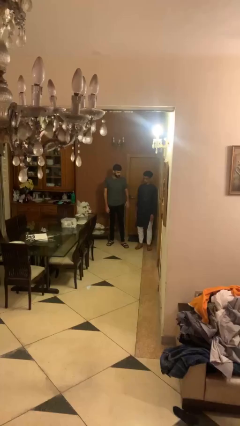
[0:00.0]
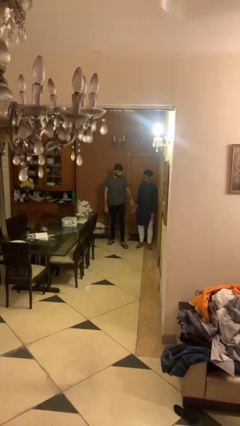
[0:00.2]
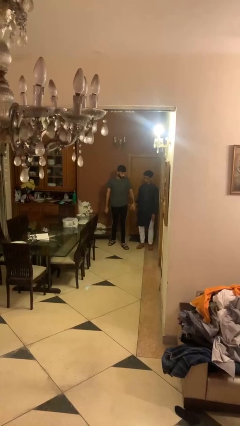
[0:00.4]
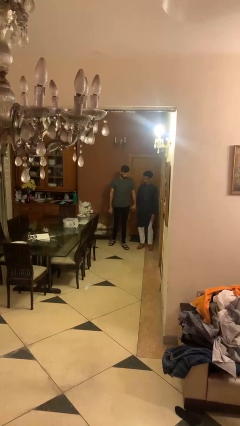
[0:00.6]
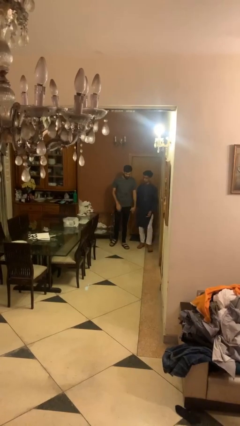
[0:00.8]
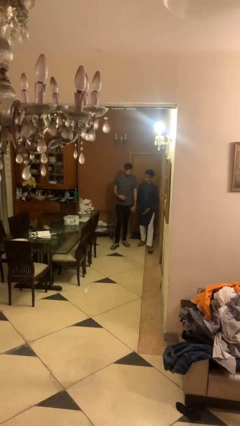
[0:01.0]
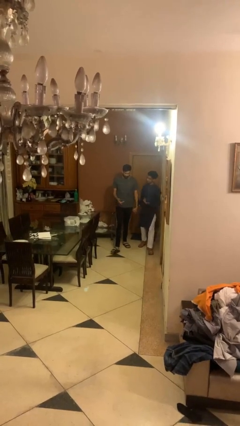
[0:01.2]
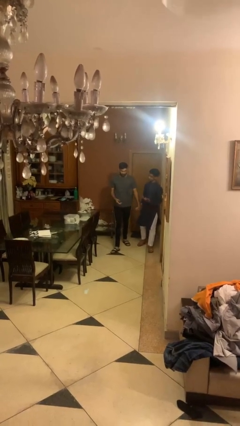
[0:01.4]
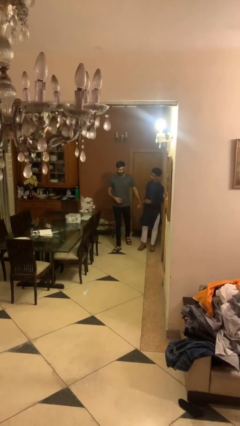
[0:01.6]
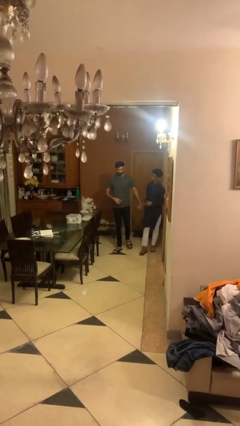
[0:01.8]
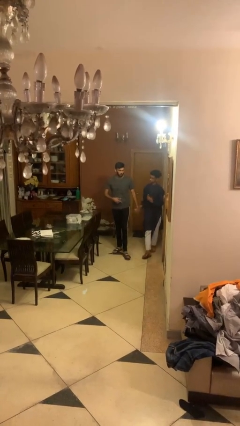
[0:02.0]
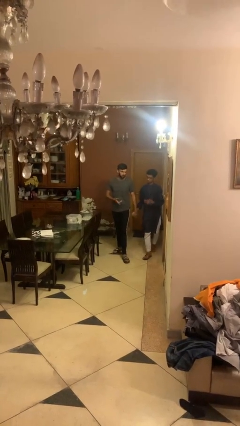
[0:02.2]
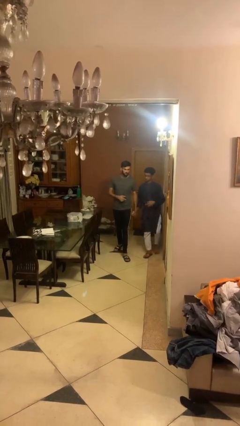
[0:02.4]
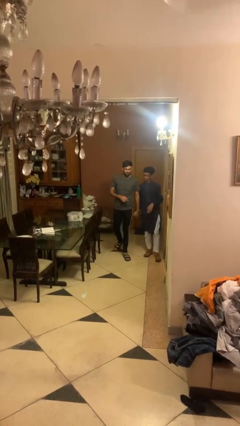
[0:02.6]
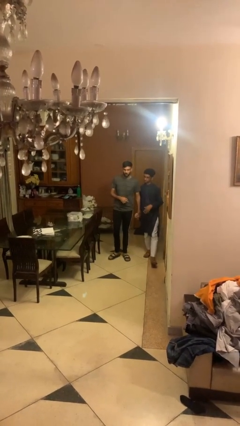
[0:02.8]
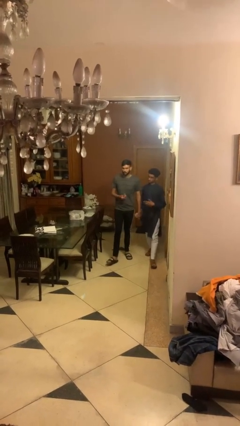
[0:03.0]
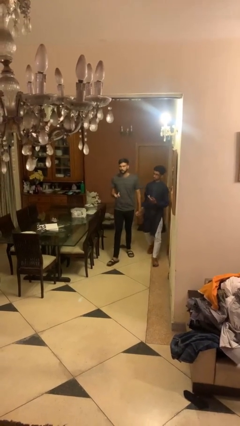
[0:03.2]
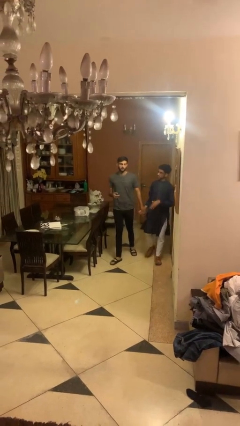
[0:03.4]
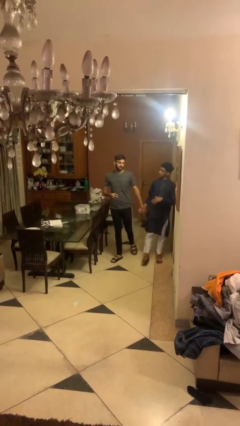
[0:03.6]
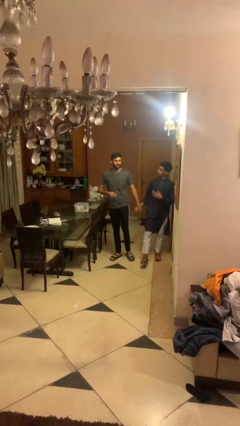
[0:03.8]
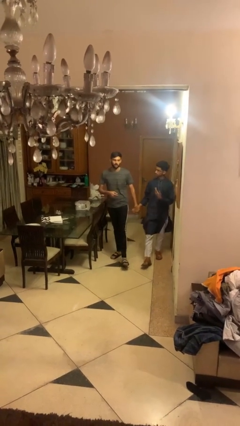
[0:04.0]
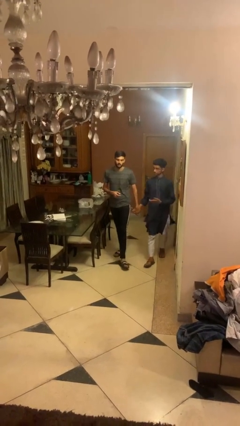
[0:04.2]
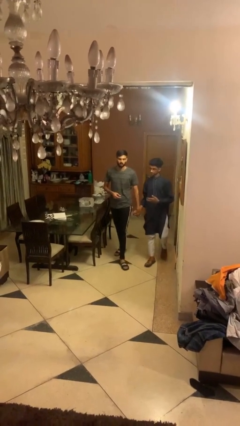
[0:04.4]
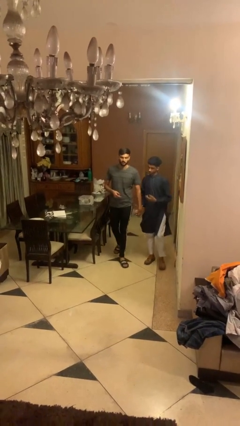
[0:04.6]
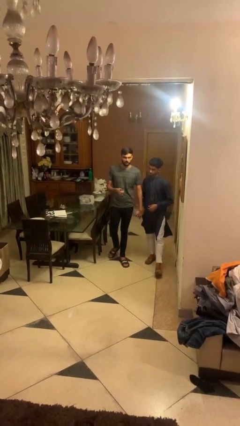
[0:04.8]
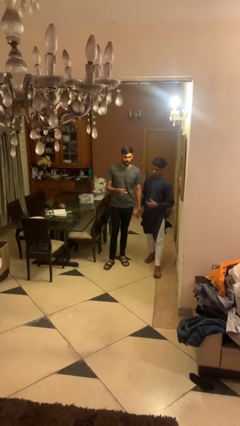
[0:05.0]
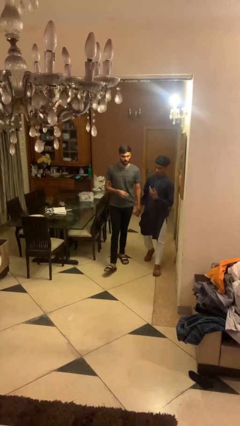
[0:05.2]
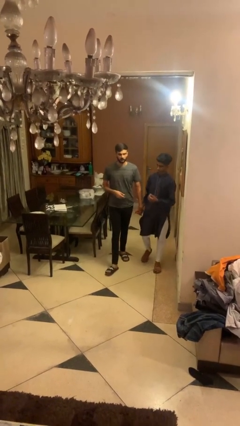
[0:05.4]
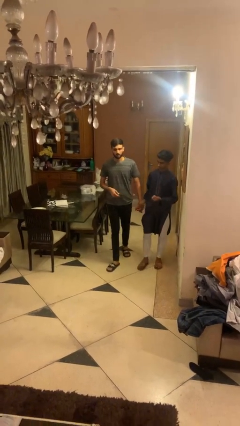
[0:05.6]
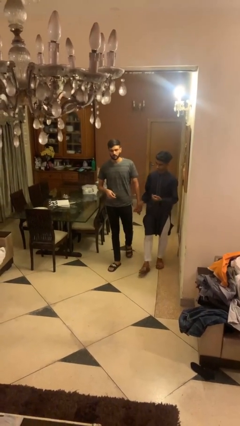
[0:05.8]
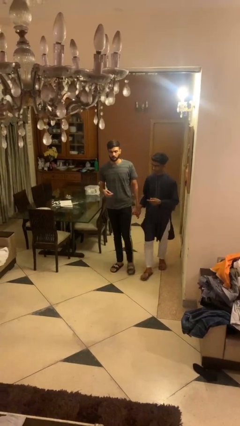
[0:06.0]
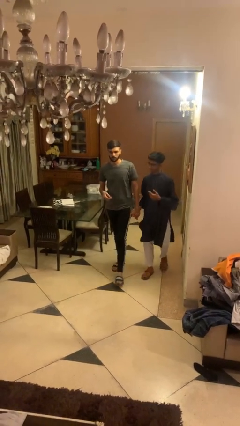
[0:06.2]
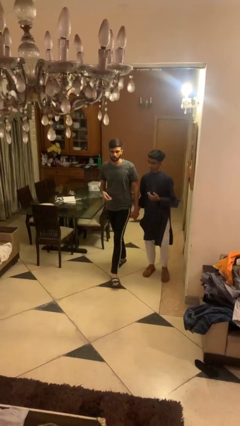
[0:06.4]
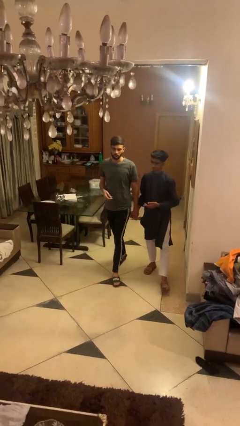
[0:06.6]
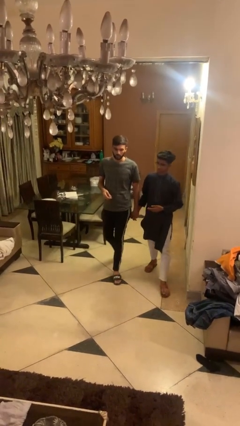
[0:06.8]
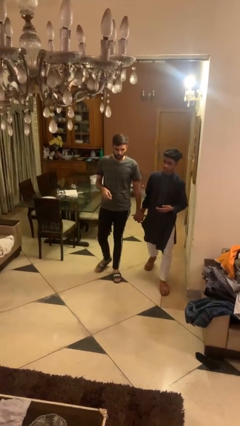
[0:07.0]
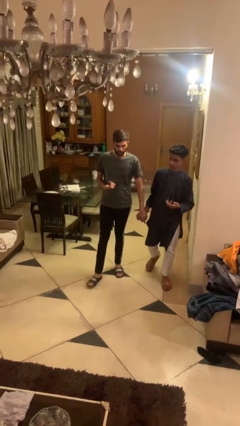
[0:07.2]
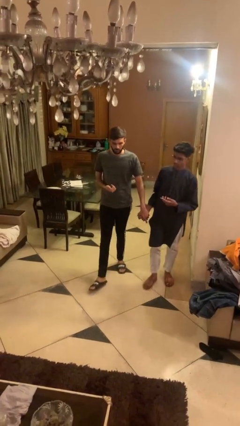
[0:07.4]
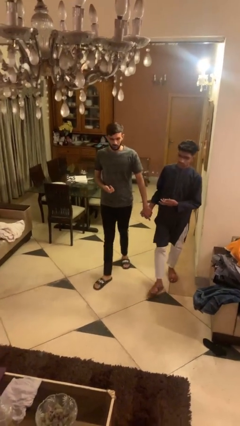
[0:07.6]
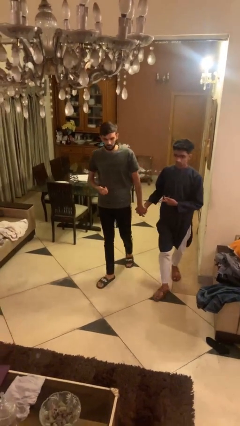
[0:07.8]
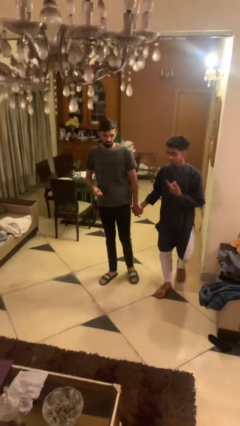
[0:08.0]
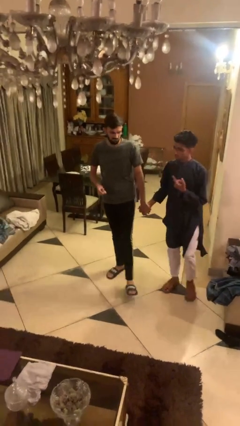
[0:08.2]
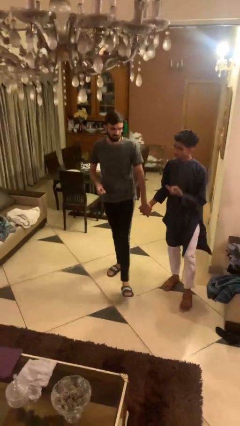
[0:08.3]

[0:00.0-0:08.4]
person holds hand

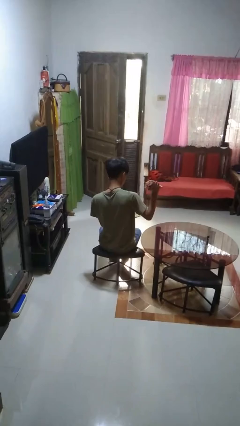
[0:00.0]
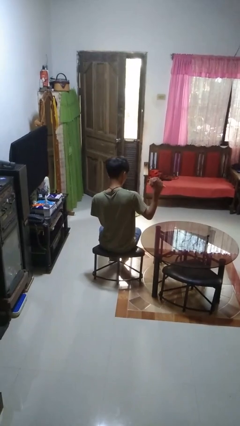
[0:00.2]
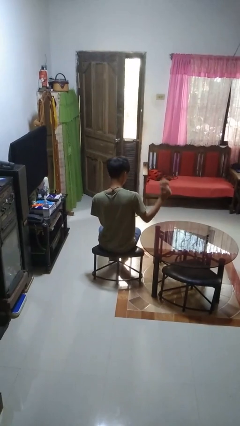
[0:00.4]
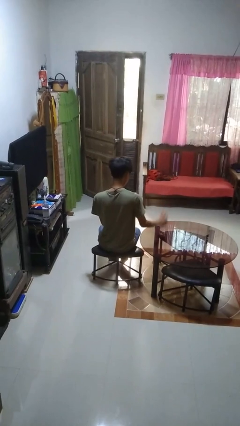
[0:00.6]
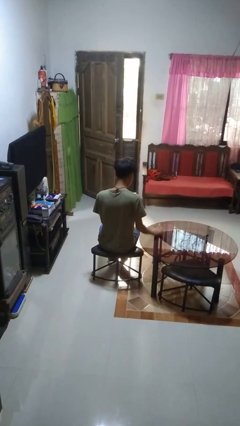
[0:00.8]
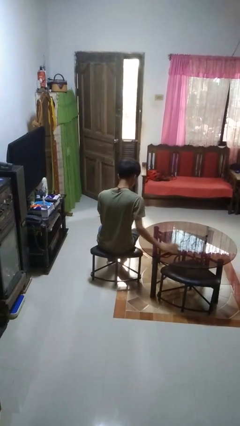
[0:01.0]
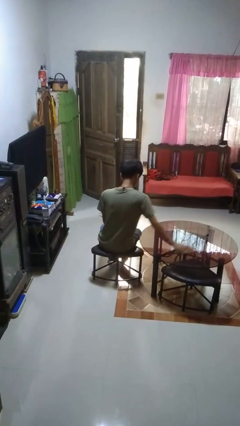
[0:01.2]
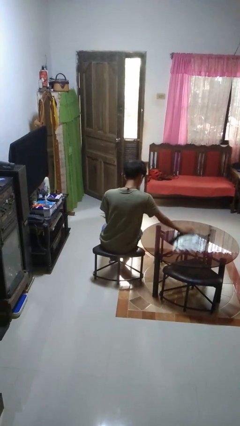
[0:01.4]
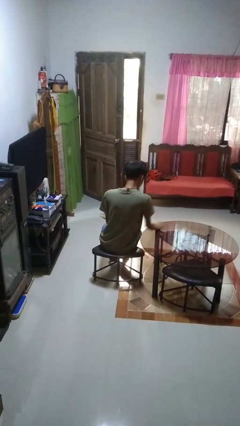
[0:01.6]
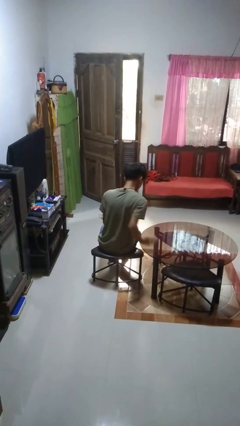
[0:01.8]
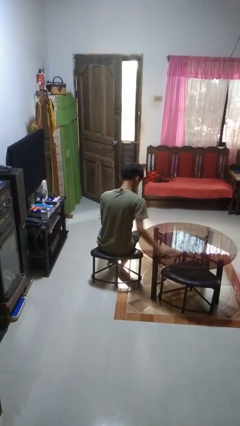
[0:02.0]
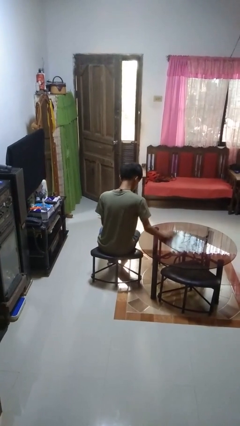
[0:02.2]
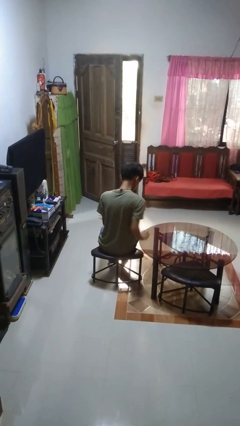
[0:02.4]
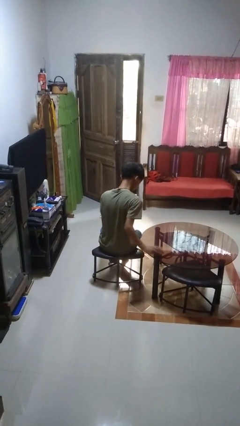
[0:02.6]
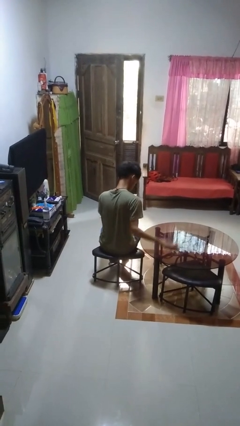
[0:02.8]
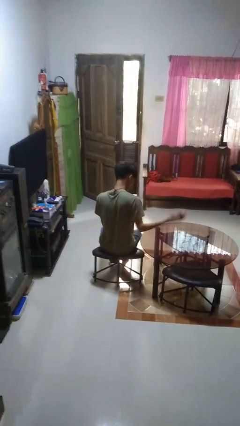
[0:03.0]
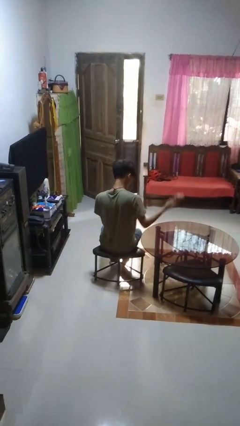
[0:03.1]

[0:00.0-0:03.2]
person cleans table with rag

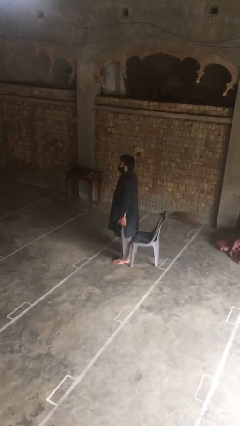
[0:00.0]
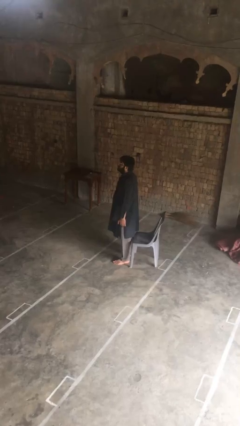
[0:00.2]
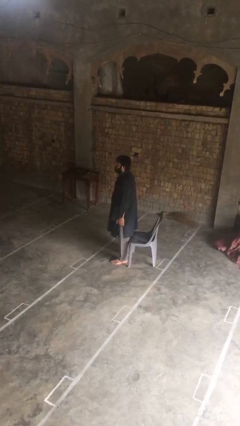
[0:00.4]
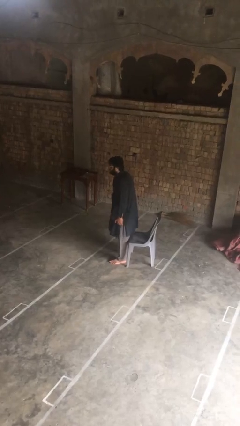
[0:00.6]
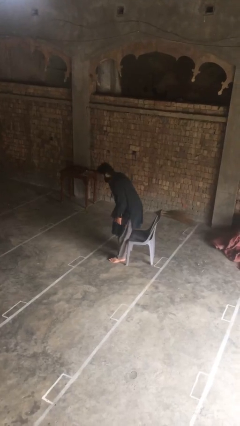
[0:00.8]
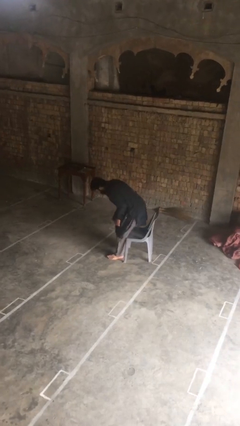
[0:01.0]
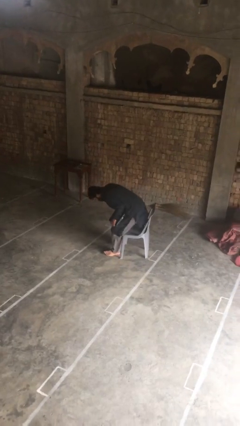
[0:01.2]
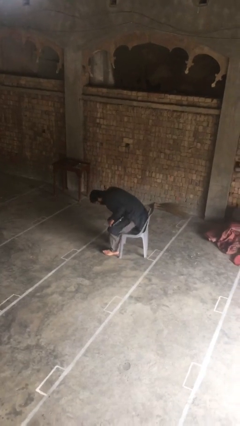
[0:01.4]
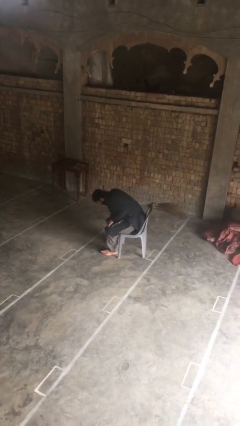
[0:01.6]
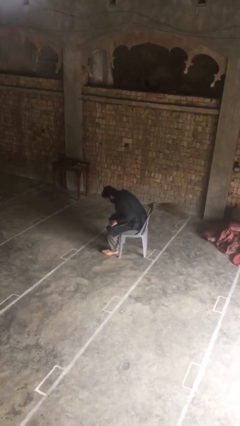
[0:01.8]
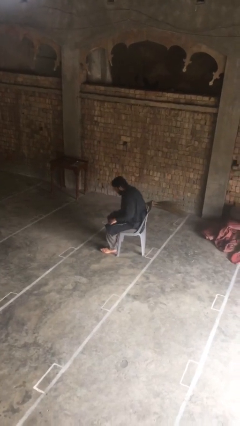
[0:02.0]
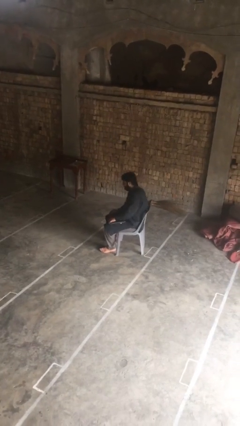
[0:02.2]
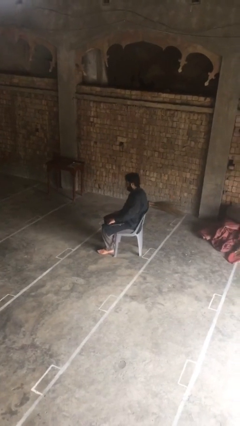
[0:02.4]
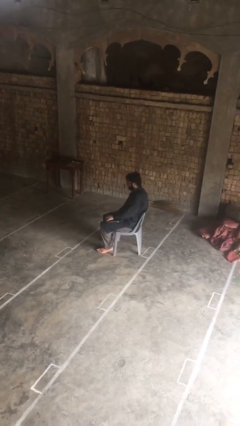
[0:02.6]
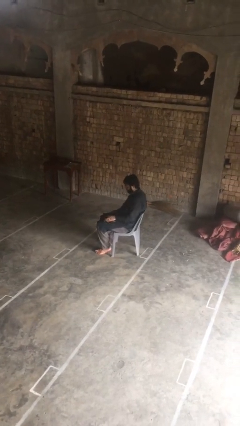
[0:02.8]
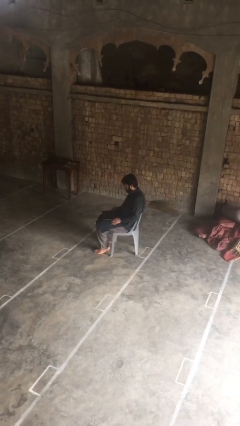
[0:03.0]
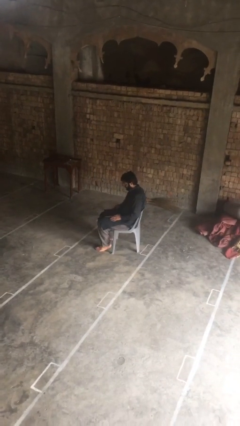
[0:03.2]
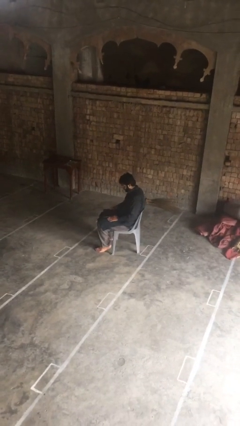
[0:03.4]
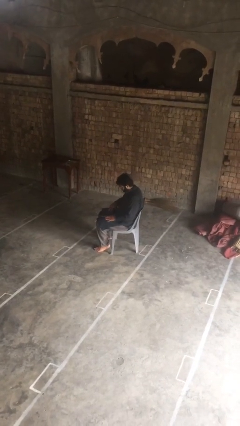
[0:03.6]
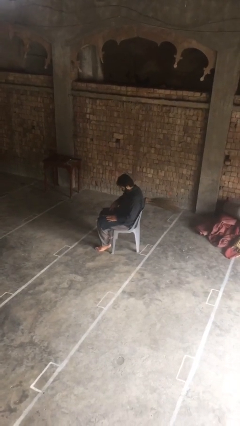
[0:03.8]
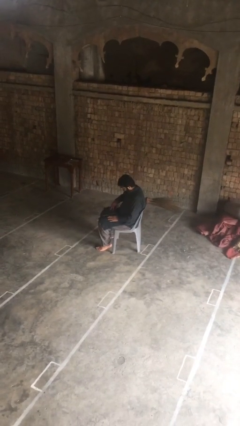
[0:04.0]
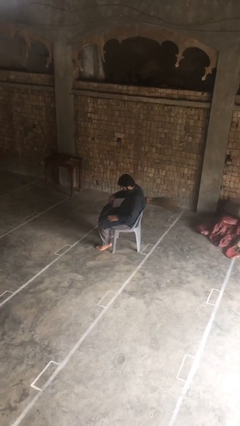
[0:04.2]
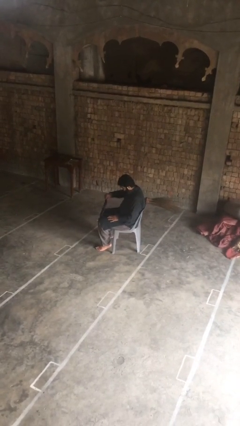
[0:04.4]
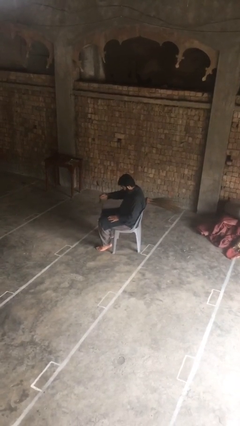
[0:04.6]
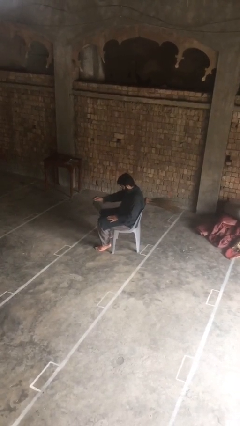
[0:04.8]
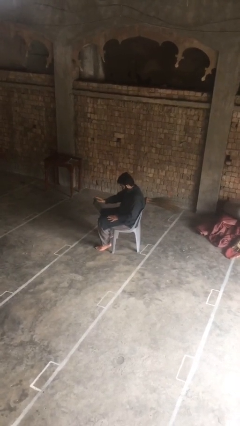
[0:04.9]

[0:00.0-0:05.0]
person sits down

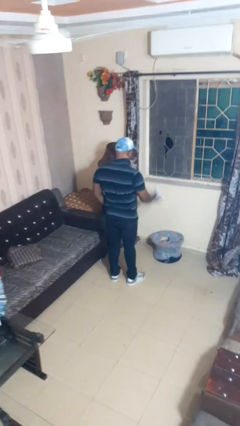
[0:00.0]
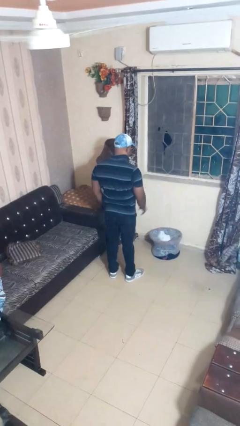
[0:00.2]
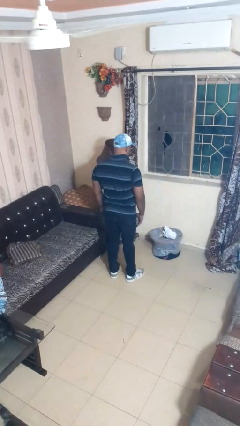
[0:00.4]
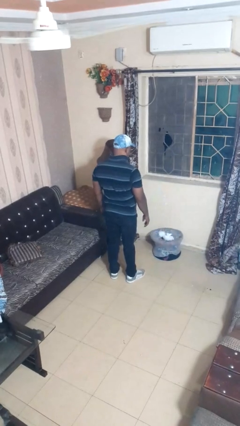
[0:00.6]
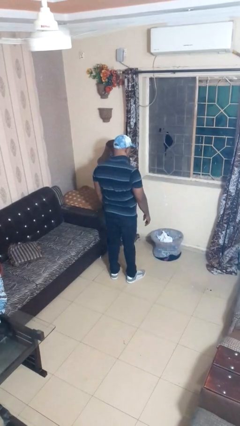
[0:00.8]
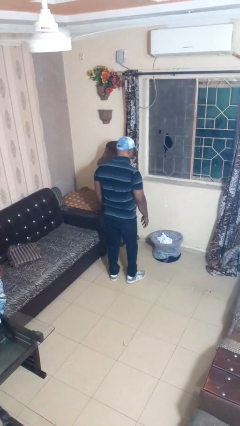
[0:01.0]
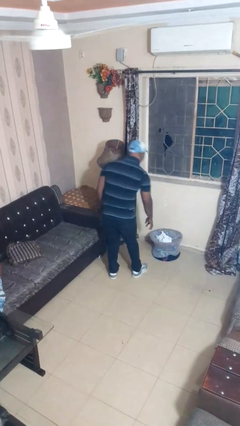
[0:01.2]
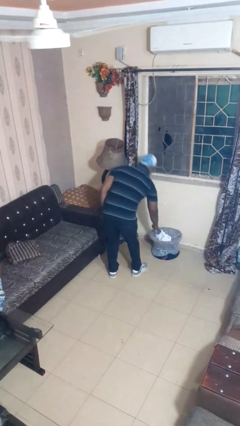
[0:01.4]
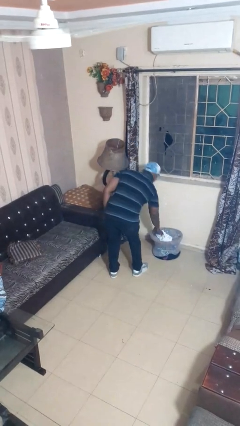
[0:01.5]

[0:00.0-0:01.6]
person takes object from basket
